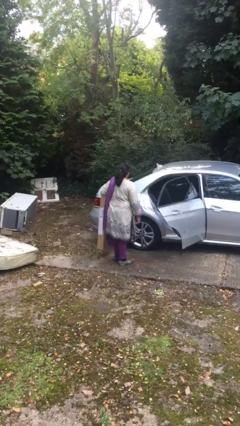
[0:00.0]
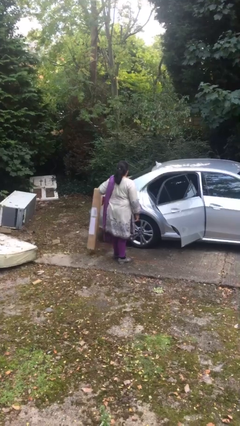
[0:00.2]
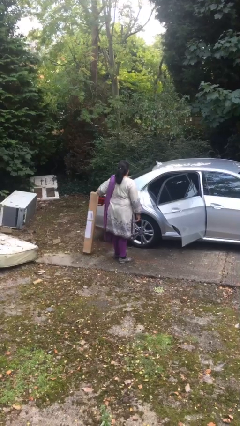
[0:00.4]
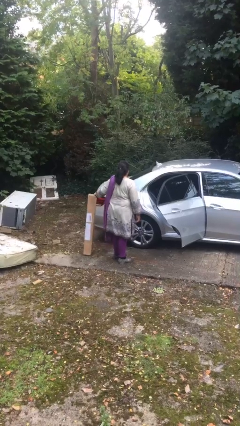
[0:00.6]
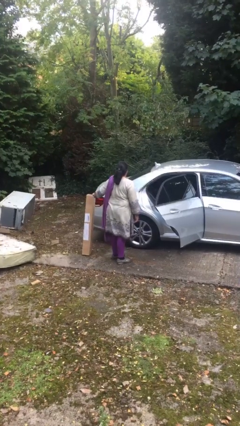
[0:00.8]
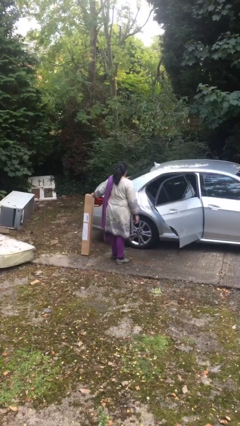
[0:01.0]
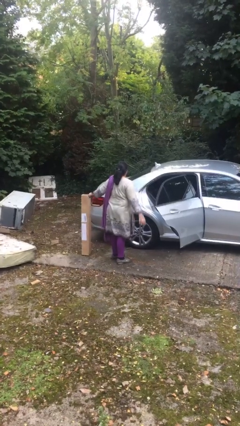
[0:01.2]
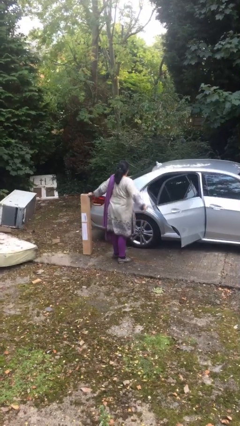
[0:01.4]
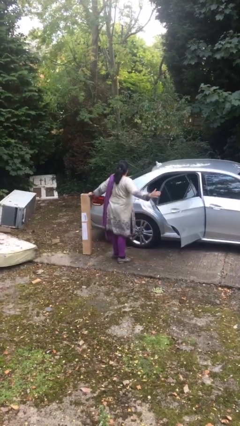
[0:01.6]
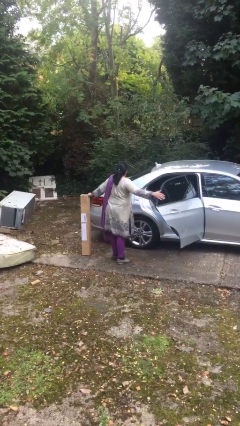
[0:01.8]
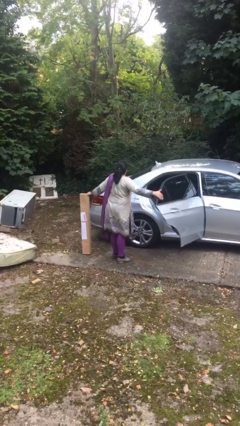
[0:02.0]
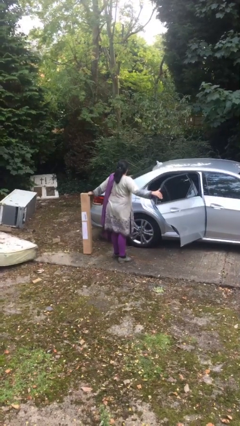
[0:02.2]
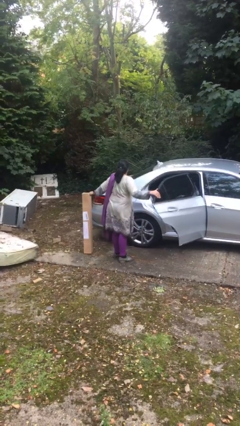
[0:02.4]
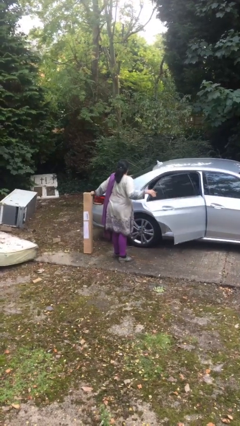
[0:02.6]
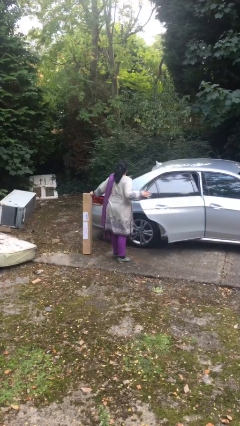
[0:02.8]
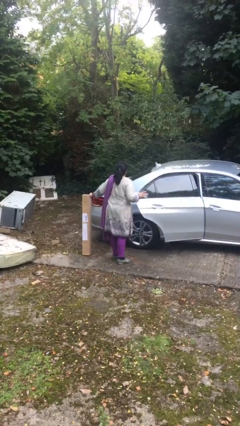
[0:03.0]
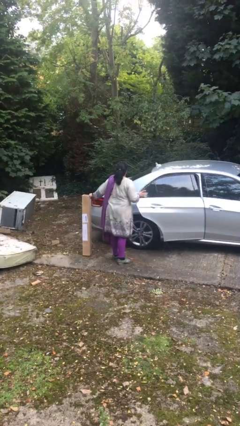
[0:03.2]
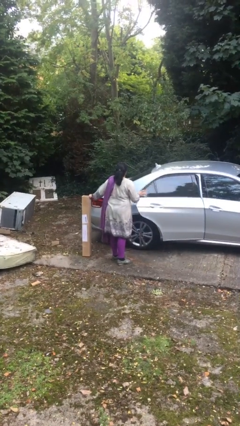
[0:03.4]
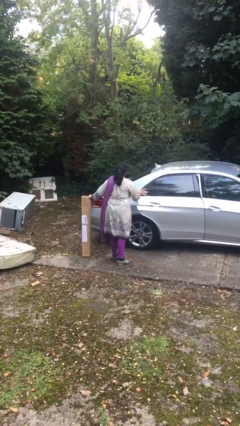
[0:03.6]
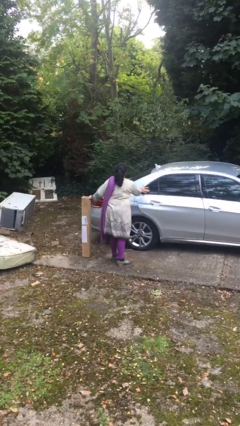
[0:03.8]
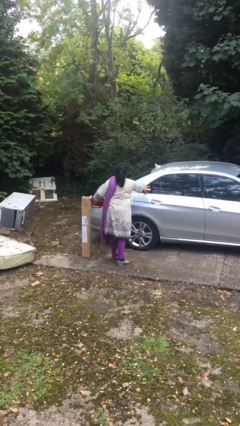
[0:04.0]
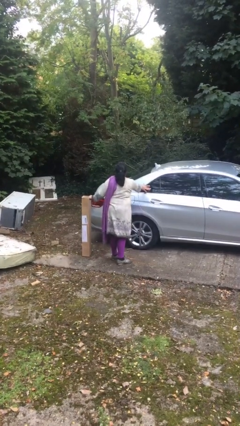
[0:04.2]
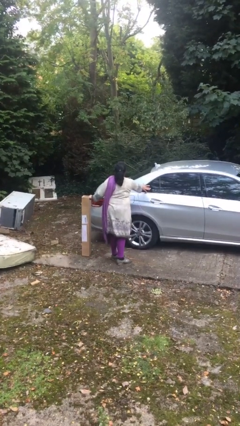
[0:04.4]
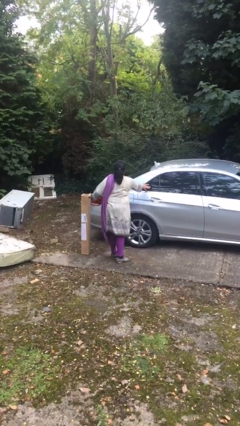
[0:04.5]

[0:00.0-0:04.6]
person closes car door

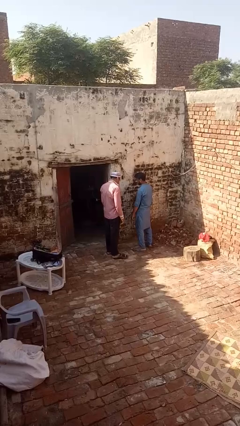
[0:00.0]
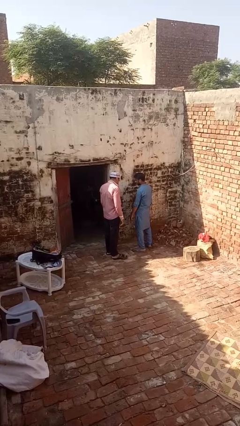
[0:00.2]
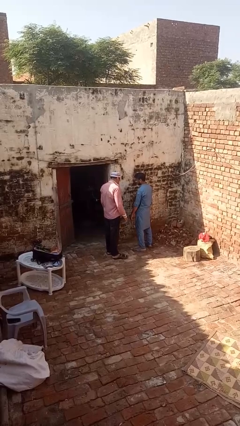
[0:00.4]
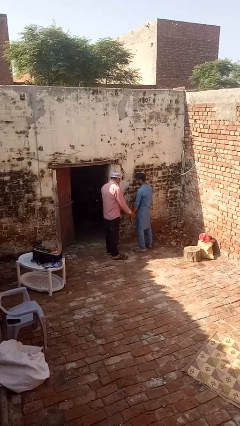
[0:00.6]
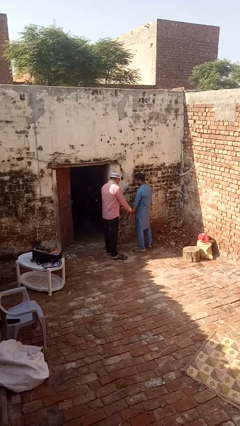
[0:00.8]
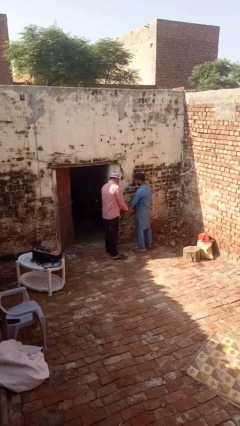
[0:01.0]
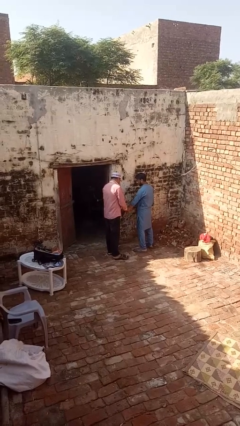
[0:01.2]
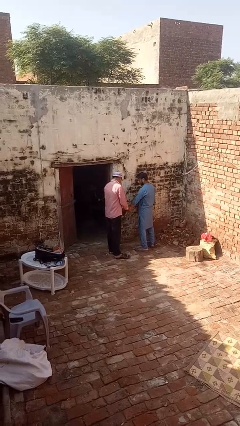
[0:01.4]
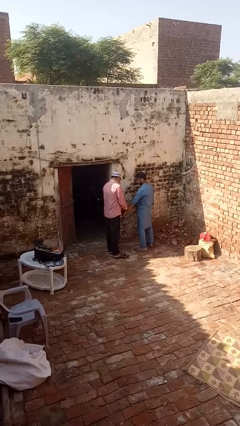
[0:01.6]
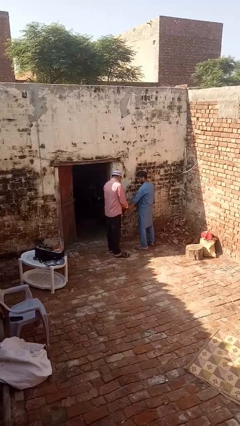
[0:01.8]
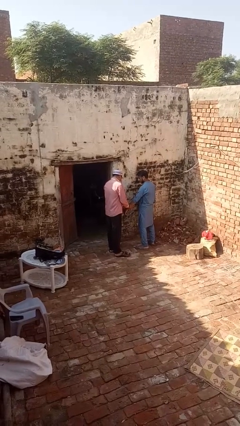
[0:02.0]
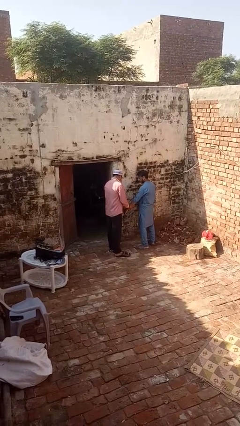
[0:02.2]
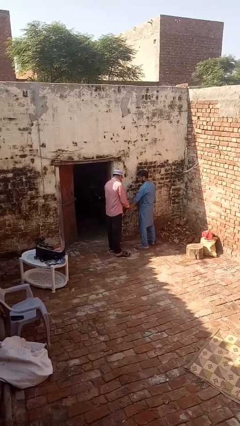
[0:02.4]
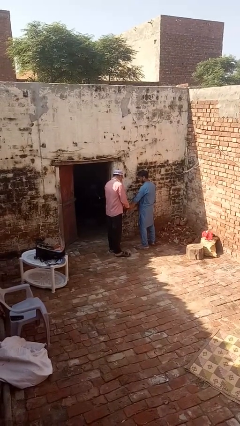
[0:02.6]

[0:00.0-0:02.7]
person grabs person by forearm

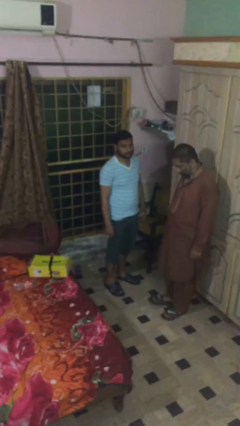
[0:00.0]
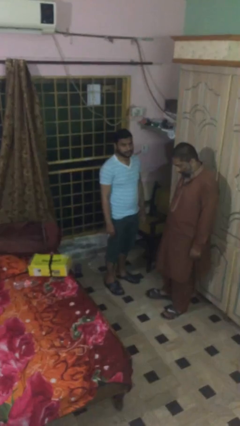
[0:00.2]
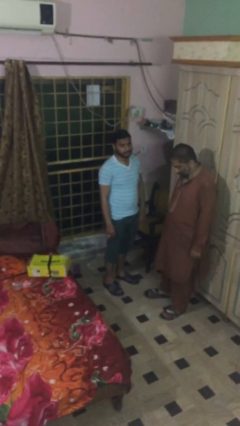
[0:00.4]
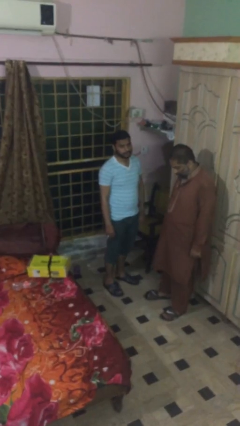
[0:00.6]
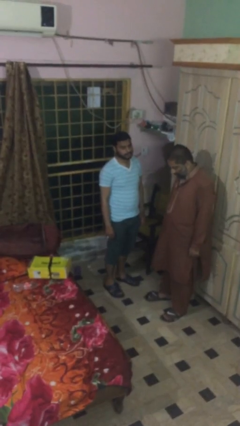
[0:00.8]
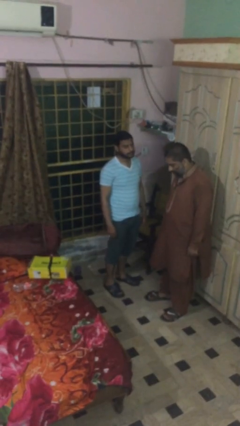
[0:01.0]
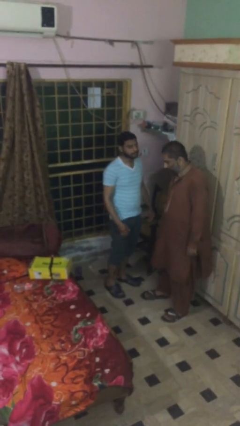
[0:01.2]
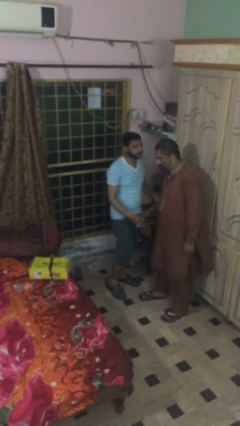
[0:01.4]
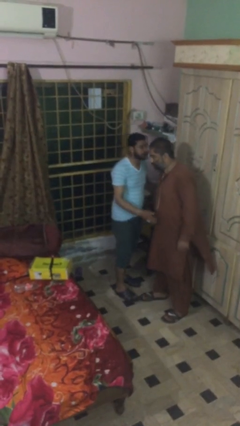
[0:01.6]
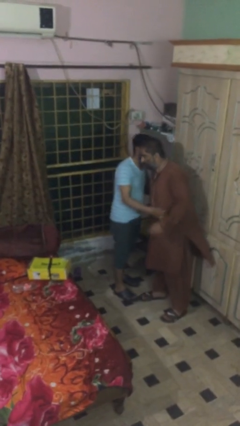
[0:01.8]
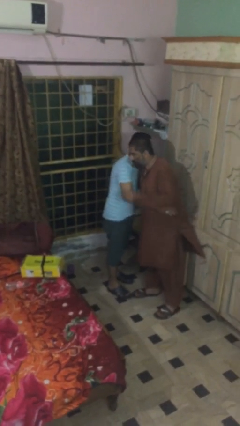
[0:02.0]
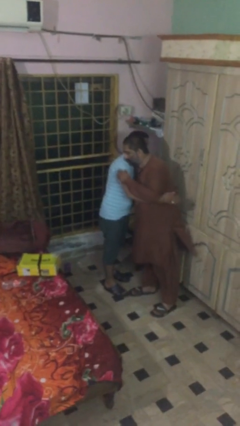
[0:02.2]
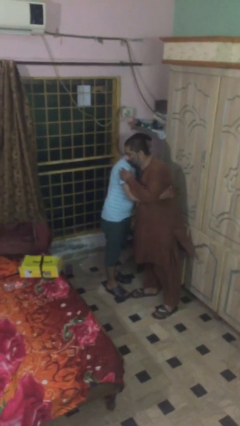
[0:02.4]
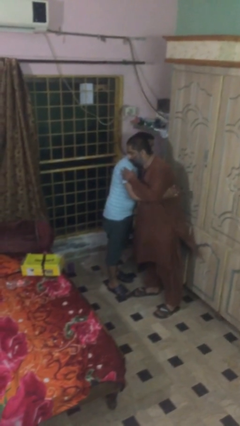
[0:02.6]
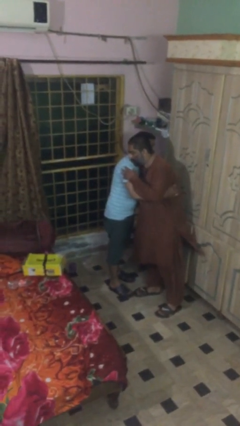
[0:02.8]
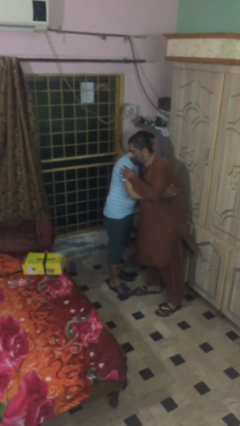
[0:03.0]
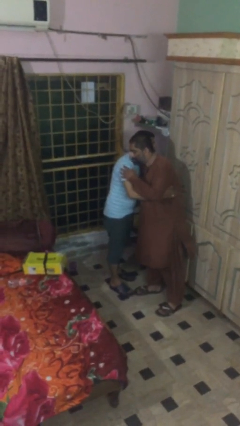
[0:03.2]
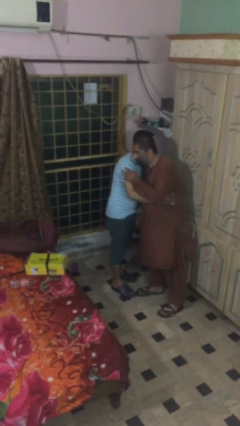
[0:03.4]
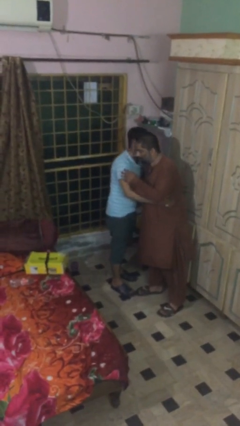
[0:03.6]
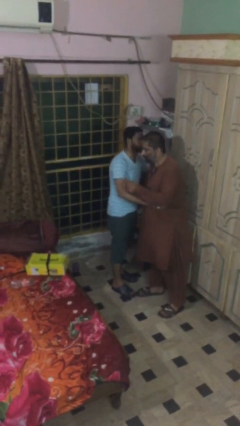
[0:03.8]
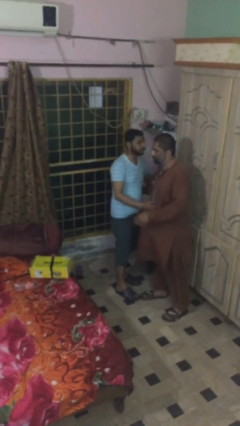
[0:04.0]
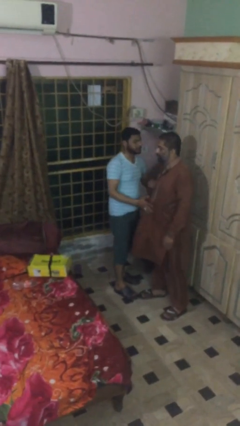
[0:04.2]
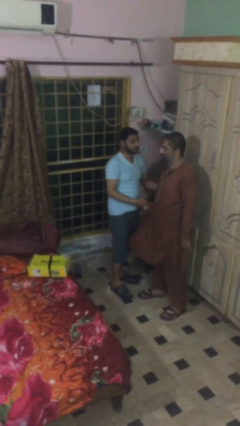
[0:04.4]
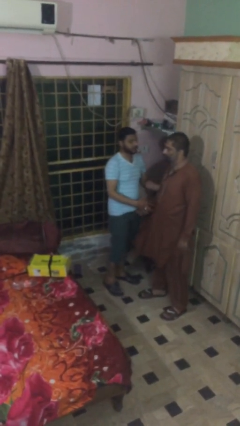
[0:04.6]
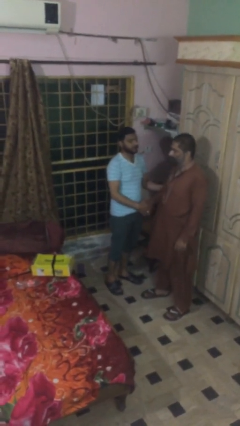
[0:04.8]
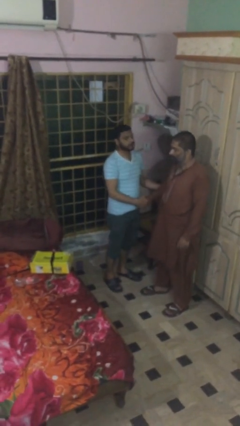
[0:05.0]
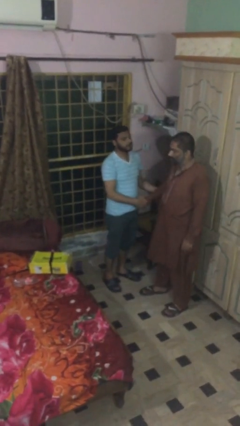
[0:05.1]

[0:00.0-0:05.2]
person embraces person

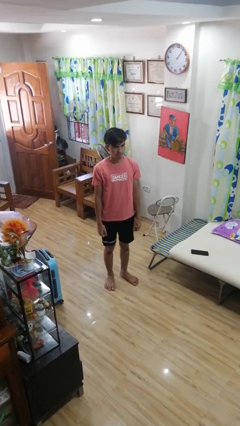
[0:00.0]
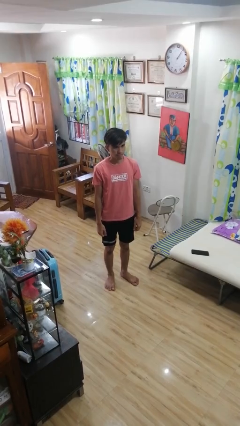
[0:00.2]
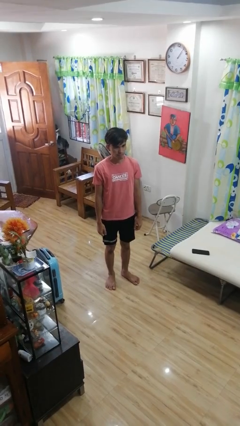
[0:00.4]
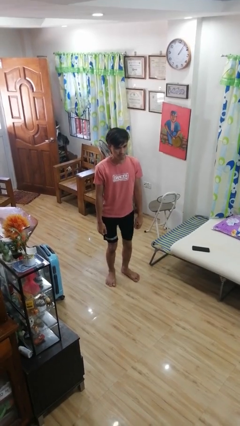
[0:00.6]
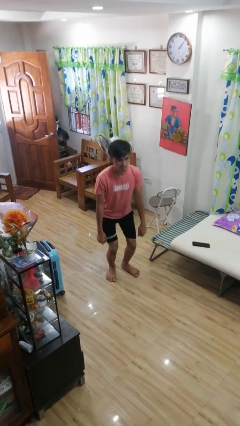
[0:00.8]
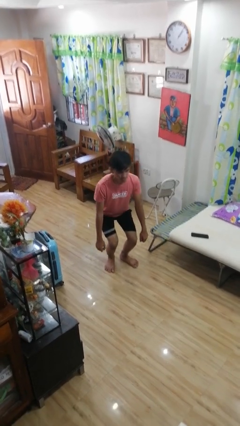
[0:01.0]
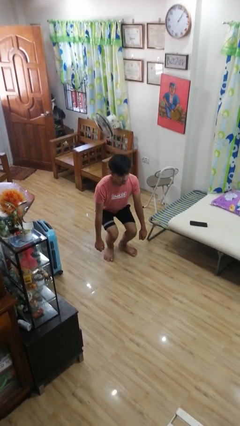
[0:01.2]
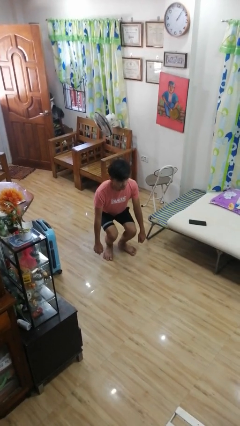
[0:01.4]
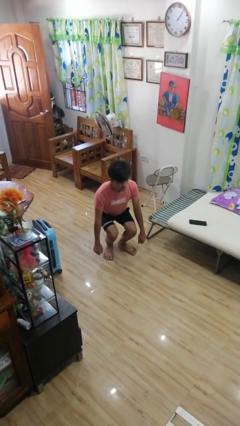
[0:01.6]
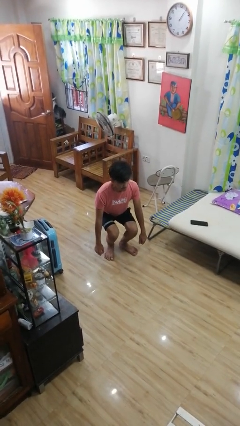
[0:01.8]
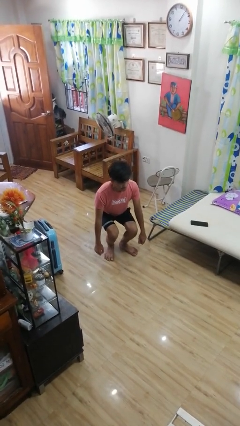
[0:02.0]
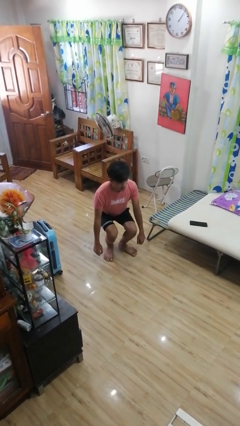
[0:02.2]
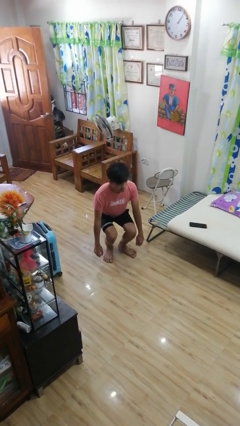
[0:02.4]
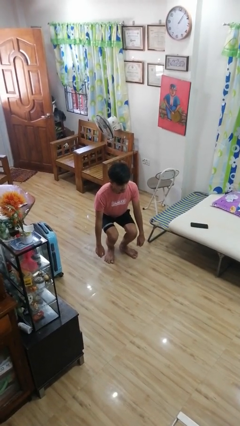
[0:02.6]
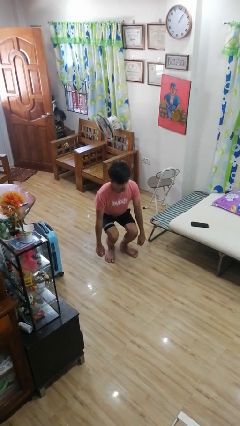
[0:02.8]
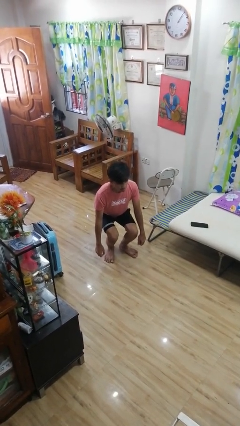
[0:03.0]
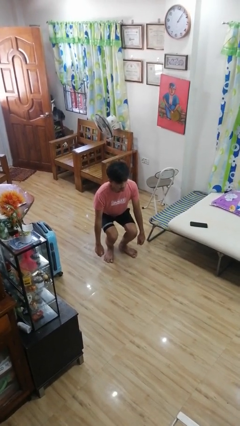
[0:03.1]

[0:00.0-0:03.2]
person squats

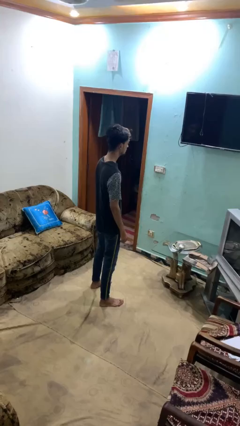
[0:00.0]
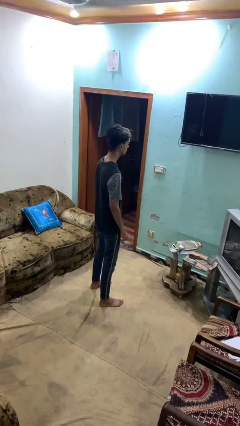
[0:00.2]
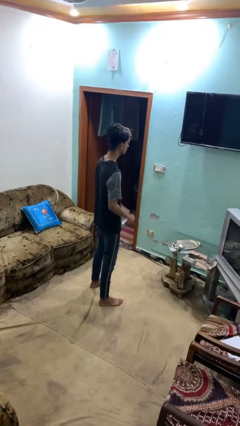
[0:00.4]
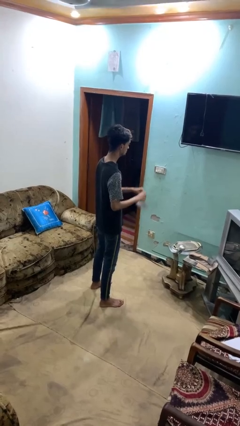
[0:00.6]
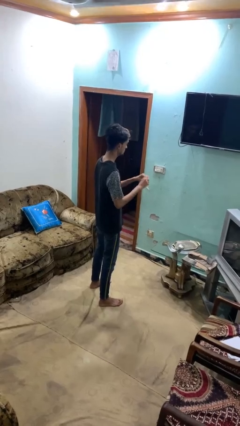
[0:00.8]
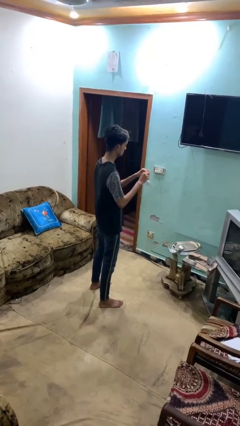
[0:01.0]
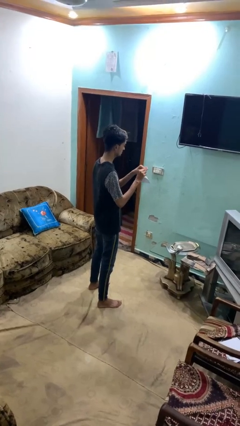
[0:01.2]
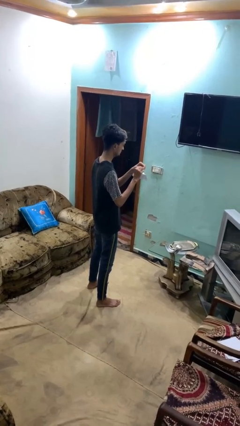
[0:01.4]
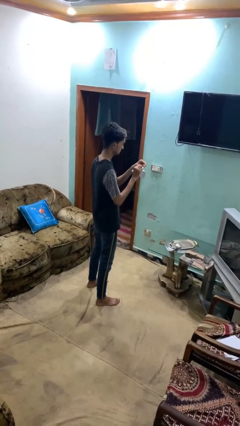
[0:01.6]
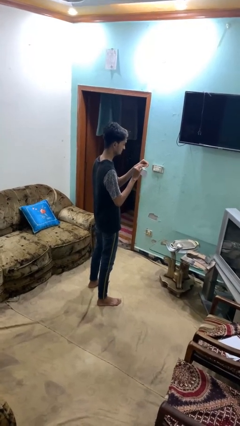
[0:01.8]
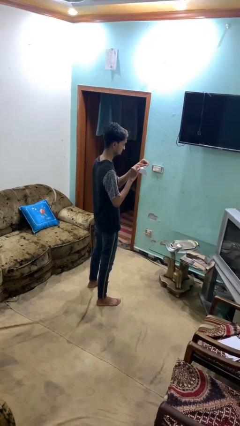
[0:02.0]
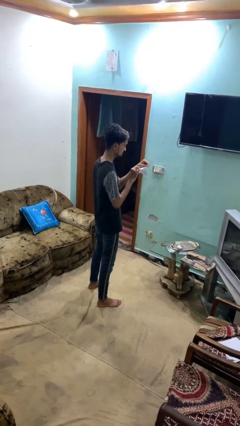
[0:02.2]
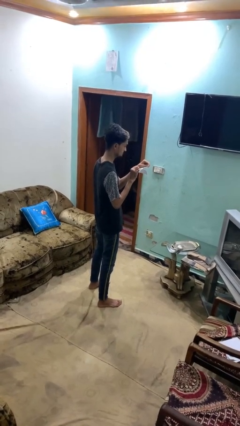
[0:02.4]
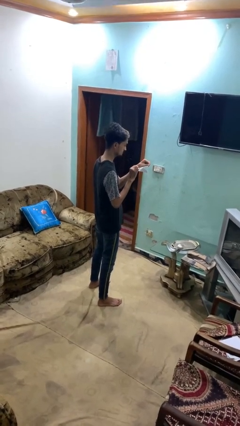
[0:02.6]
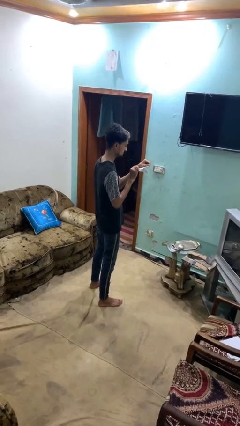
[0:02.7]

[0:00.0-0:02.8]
person tears paper
